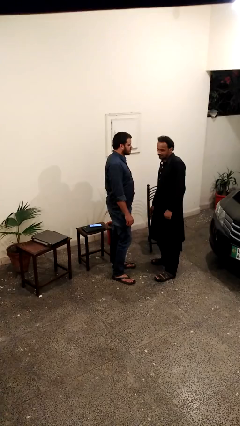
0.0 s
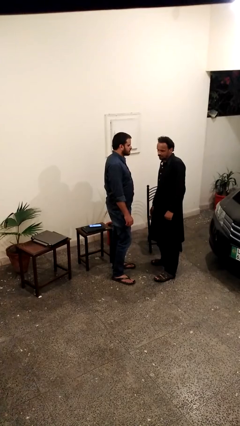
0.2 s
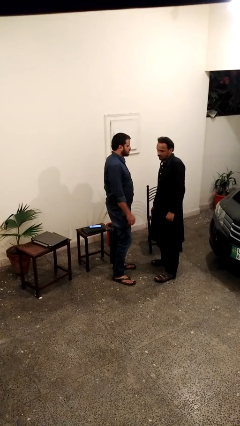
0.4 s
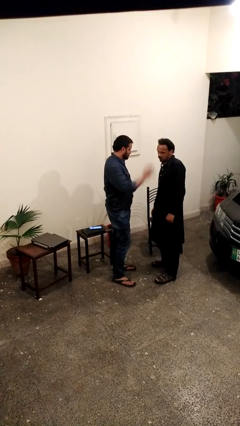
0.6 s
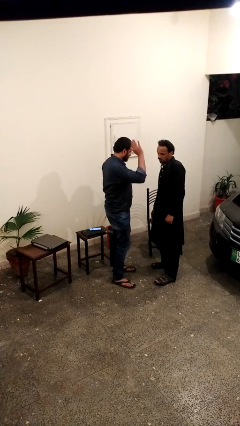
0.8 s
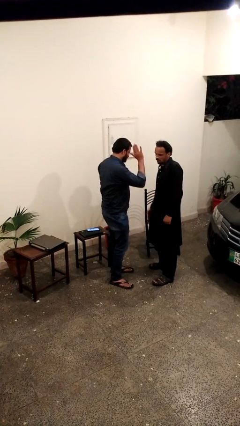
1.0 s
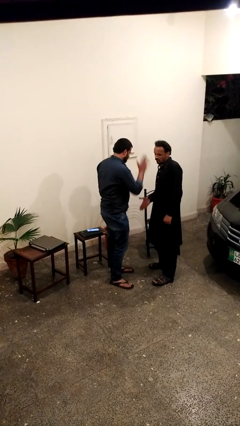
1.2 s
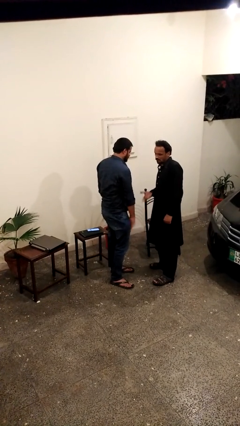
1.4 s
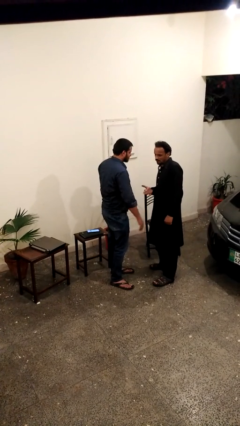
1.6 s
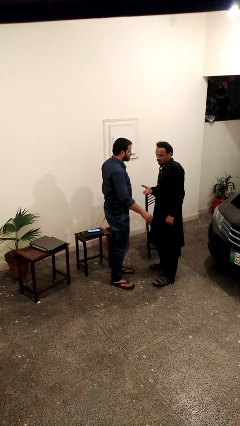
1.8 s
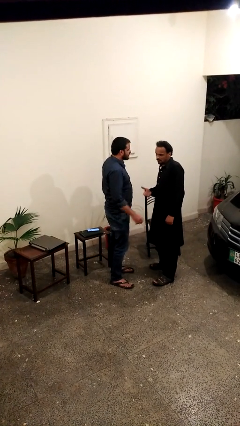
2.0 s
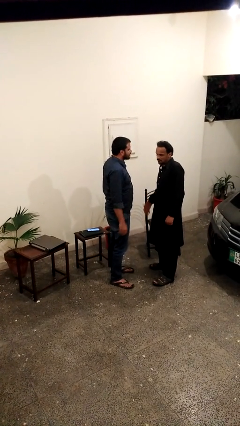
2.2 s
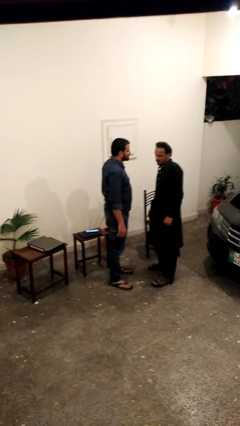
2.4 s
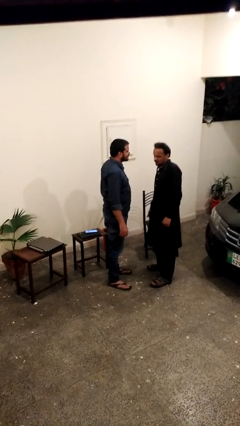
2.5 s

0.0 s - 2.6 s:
person highfives hand

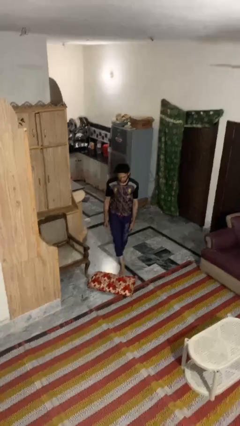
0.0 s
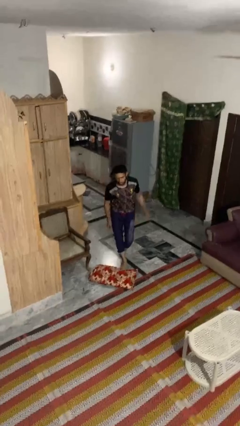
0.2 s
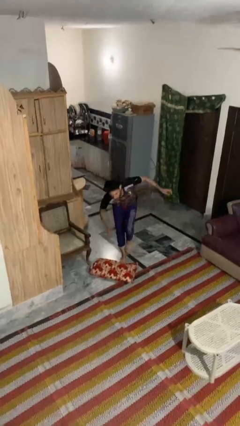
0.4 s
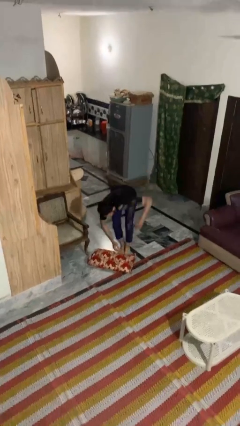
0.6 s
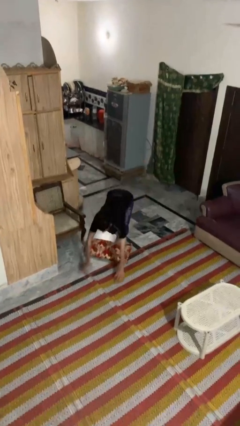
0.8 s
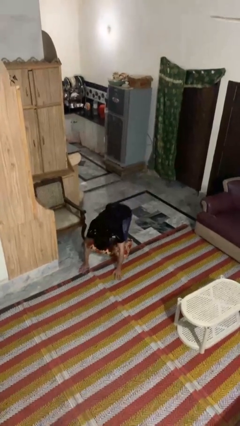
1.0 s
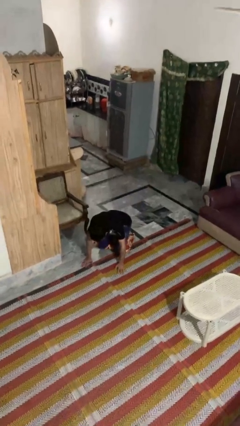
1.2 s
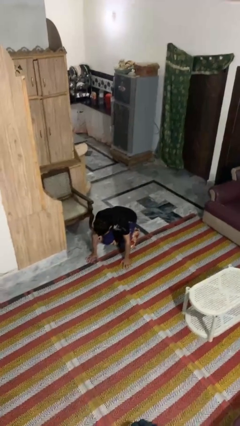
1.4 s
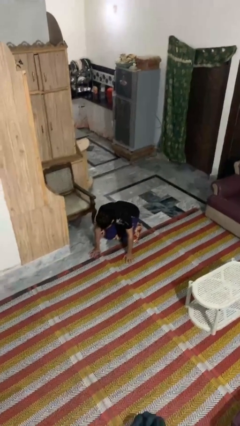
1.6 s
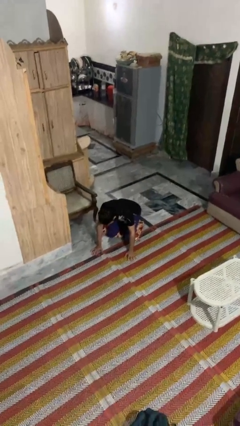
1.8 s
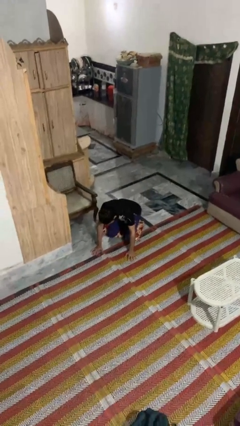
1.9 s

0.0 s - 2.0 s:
person trips on object on floor

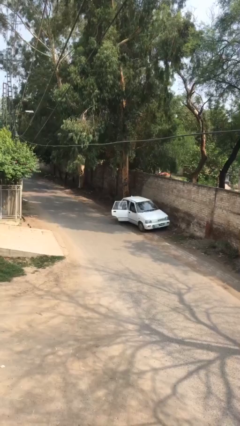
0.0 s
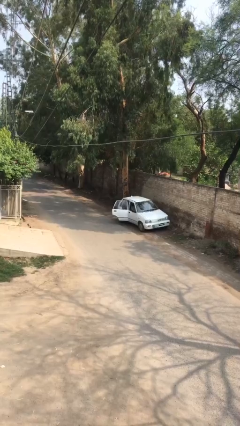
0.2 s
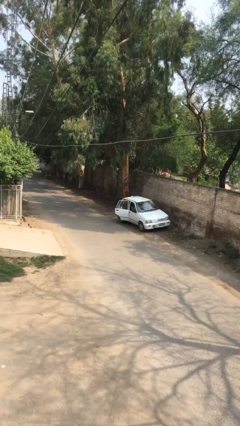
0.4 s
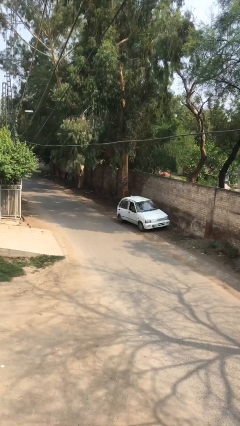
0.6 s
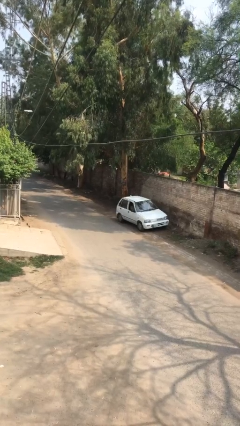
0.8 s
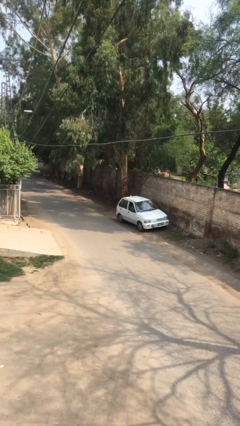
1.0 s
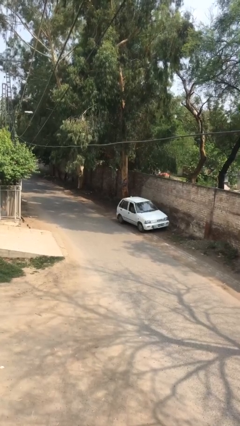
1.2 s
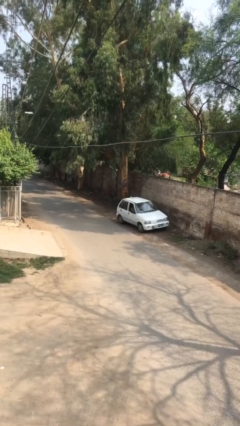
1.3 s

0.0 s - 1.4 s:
person closes car door

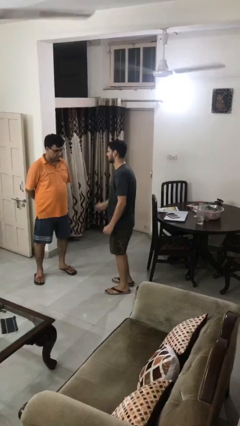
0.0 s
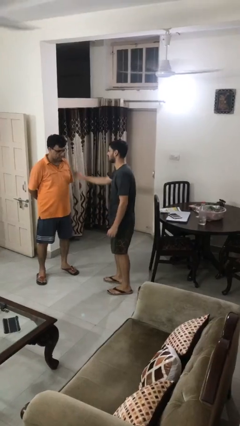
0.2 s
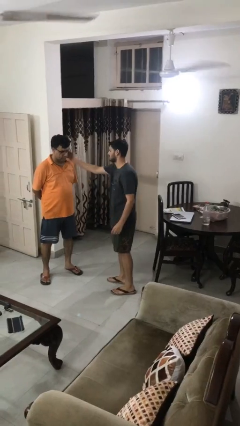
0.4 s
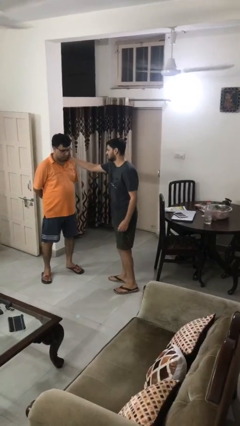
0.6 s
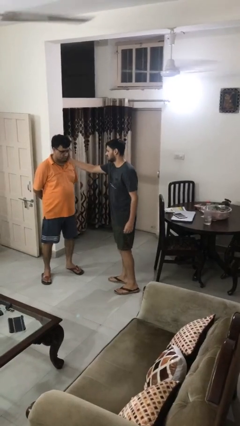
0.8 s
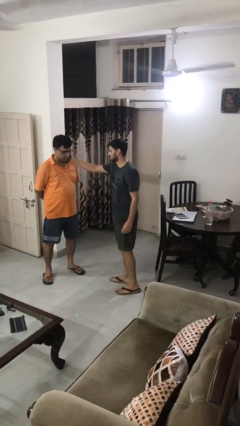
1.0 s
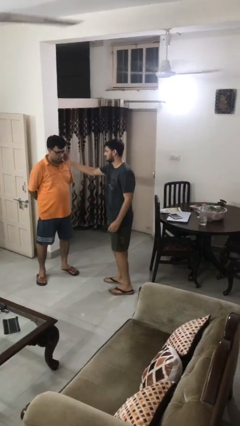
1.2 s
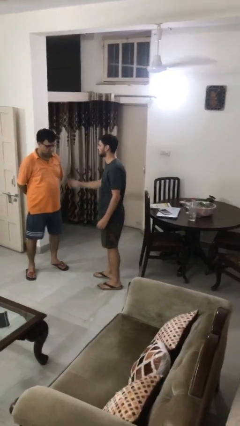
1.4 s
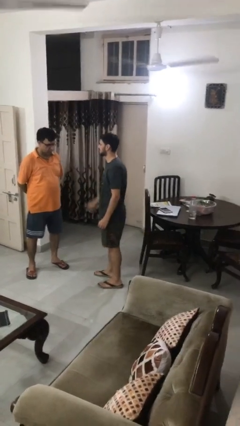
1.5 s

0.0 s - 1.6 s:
person touches face of person

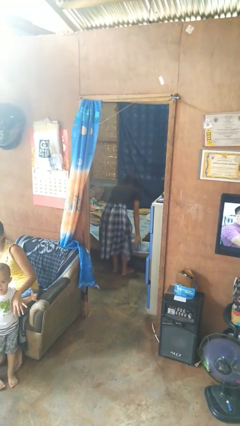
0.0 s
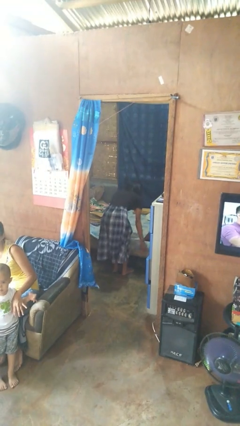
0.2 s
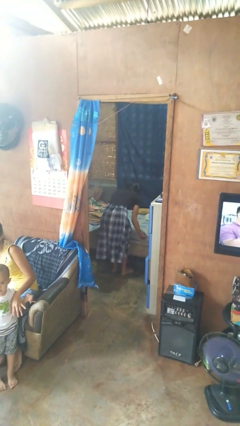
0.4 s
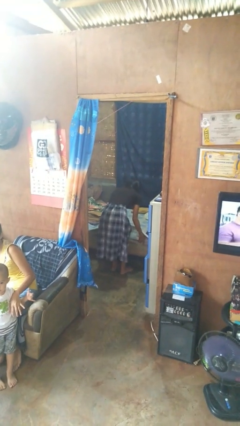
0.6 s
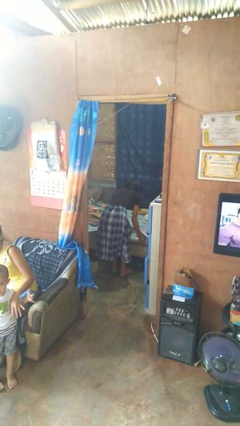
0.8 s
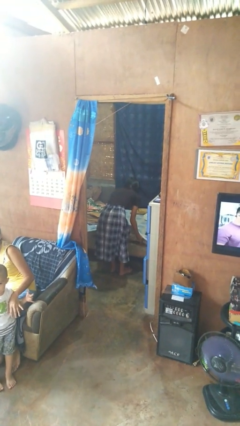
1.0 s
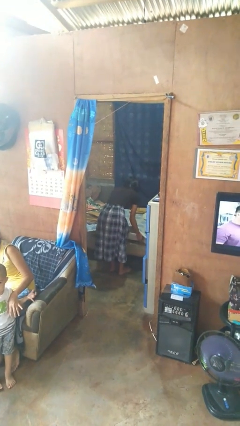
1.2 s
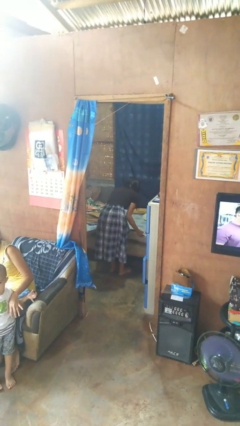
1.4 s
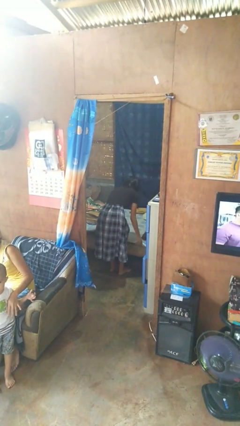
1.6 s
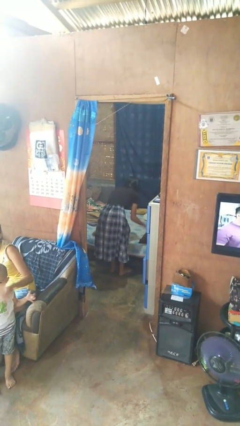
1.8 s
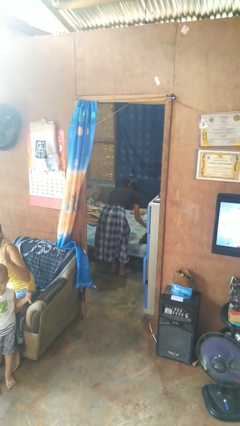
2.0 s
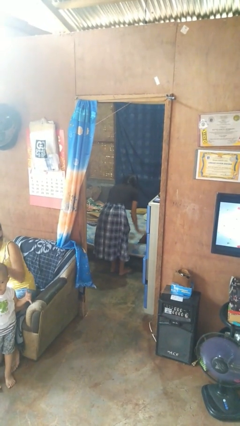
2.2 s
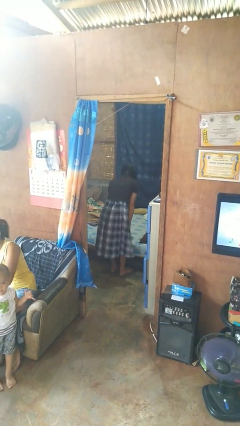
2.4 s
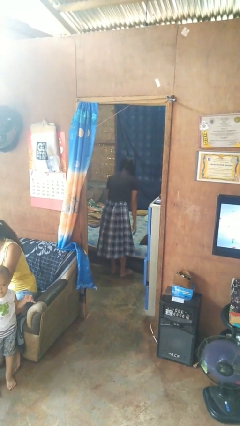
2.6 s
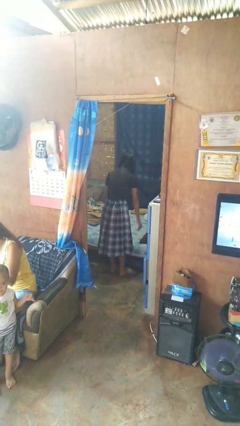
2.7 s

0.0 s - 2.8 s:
person makes bed

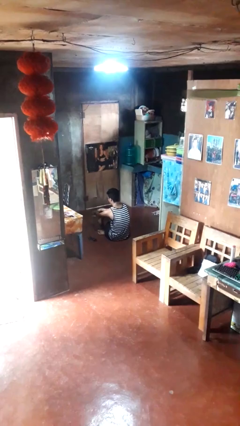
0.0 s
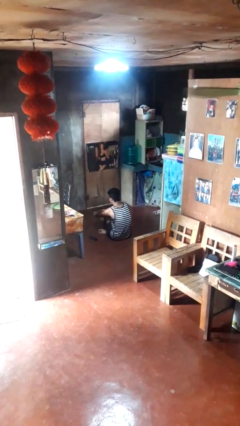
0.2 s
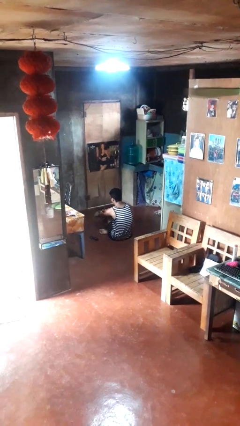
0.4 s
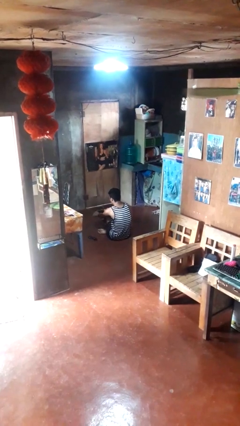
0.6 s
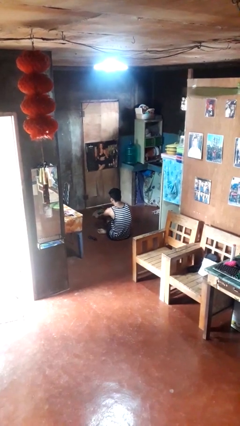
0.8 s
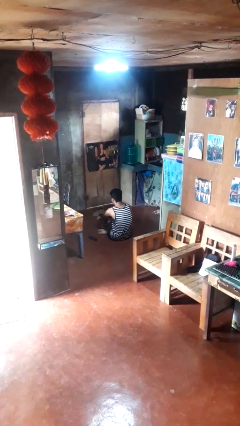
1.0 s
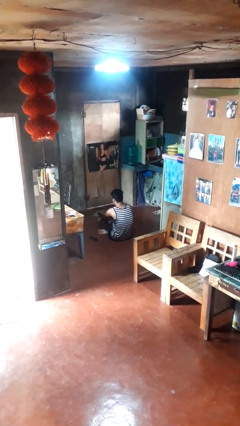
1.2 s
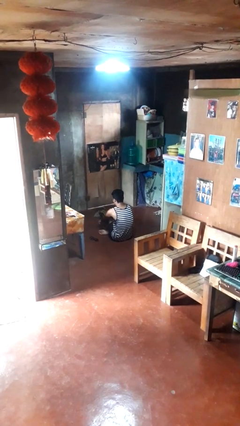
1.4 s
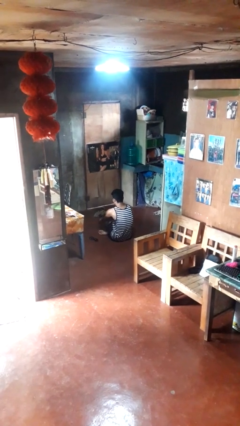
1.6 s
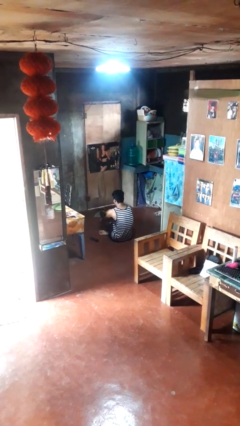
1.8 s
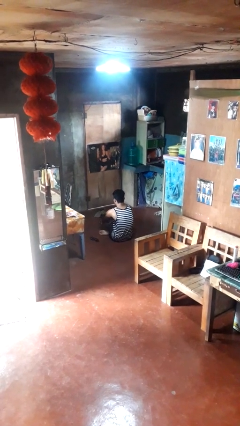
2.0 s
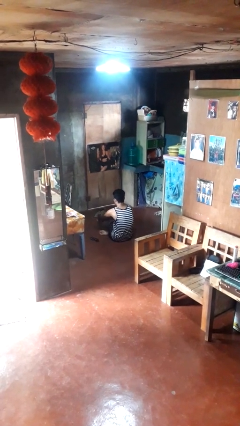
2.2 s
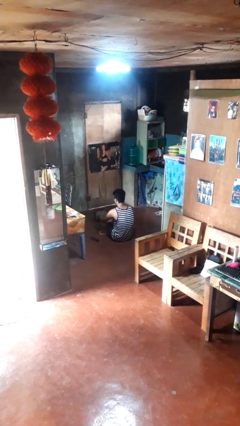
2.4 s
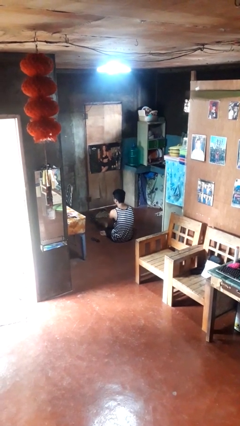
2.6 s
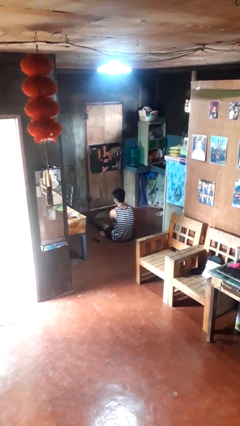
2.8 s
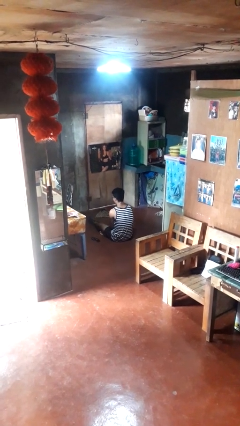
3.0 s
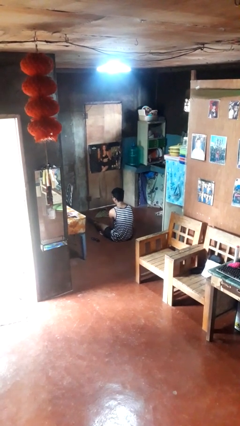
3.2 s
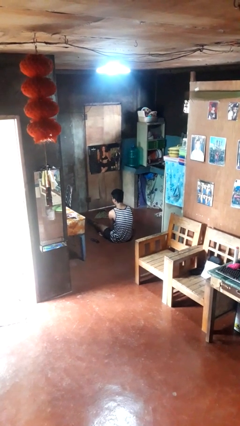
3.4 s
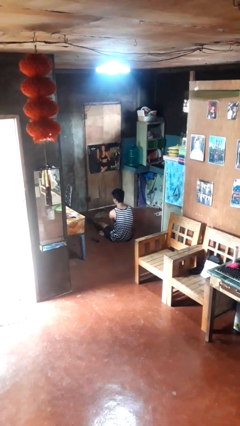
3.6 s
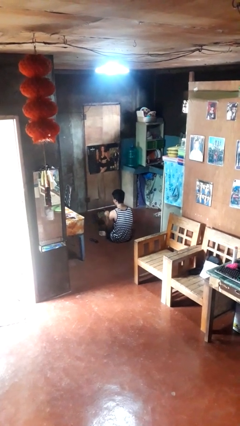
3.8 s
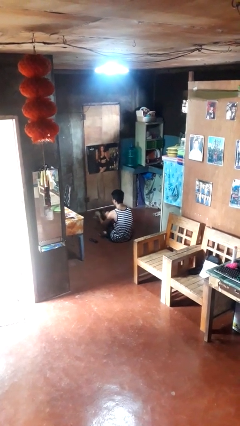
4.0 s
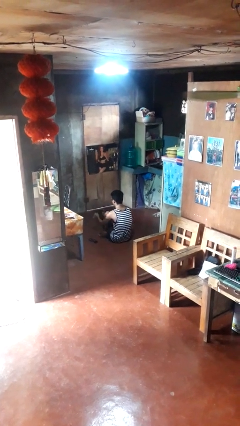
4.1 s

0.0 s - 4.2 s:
person puts on socks

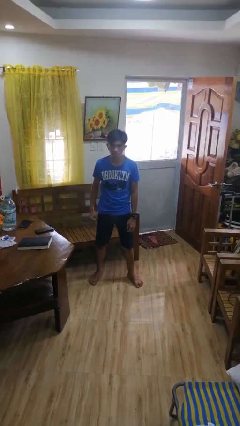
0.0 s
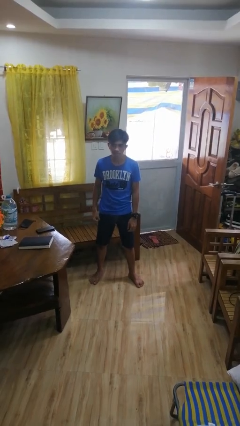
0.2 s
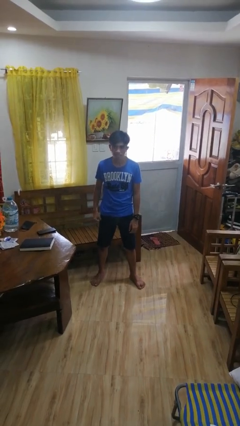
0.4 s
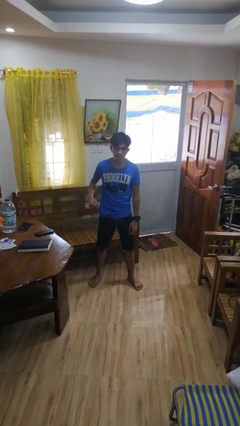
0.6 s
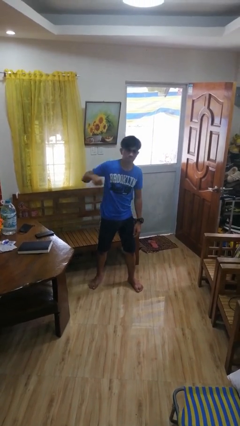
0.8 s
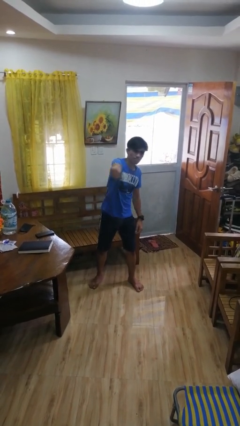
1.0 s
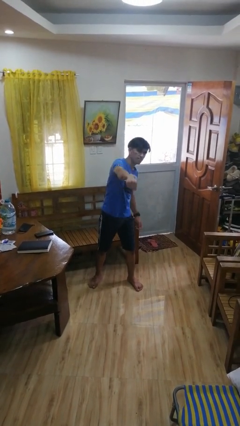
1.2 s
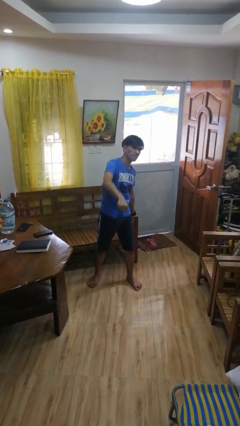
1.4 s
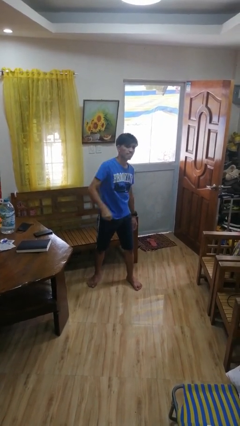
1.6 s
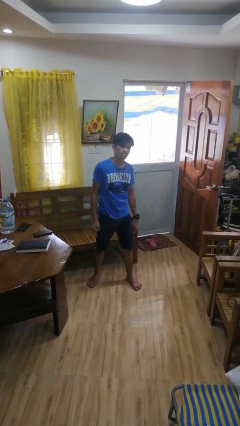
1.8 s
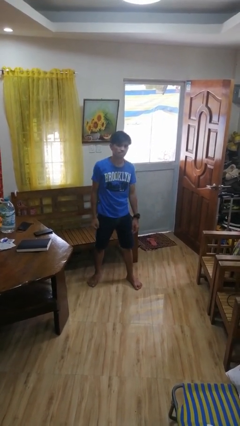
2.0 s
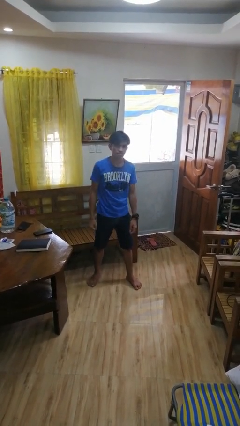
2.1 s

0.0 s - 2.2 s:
person punches

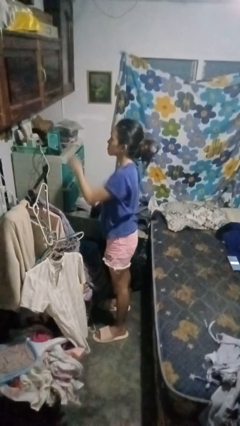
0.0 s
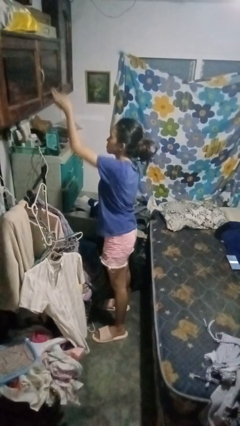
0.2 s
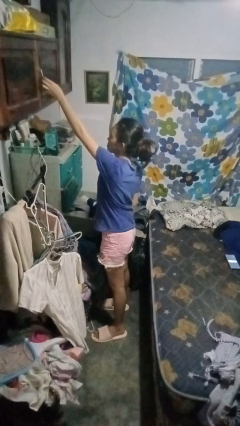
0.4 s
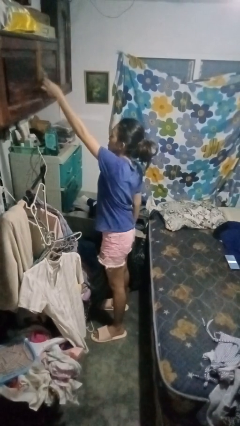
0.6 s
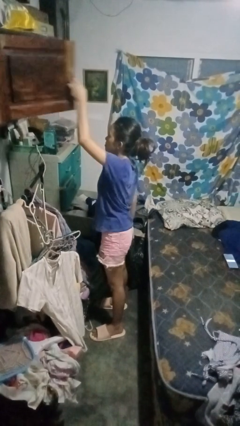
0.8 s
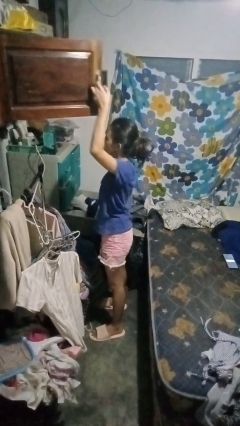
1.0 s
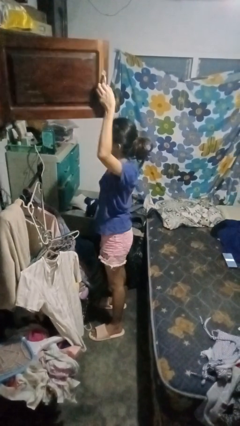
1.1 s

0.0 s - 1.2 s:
person opens closet door
